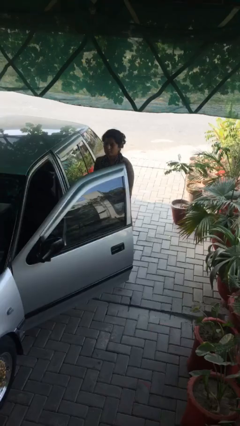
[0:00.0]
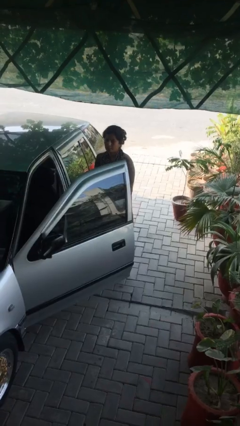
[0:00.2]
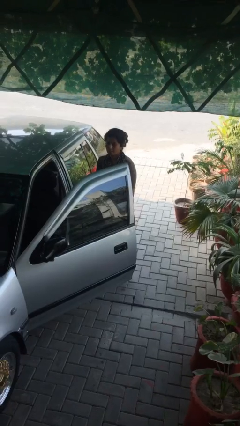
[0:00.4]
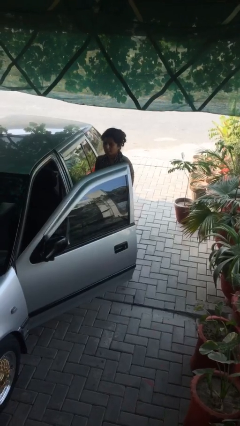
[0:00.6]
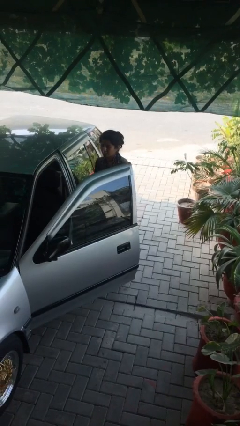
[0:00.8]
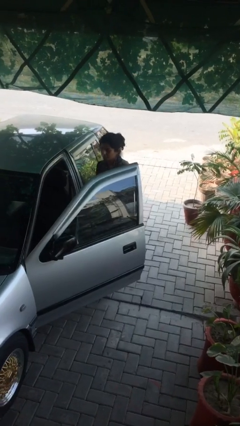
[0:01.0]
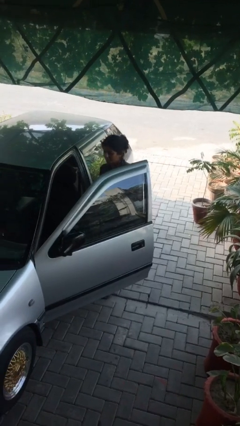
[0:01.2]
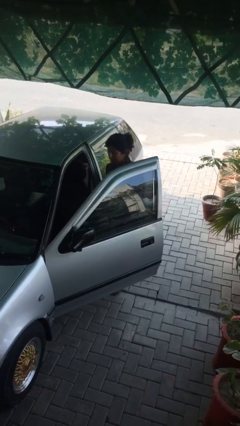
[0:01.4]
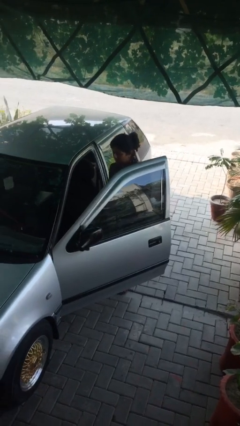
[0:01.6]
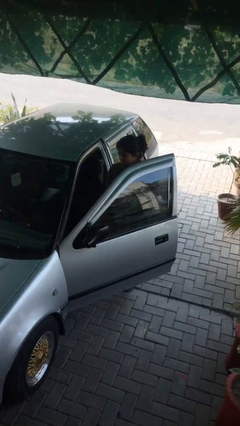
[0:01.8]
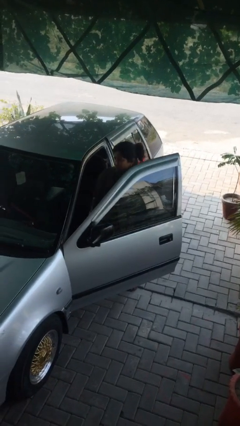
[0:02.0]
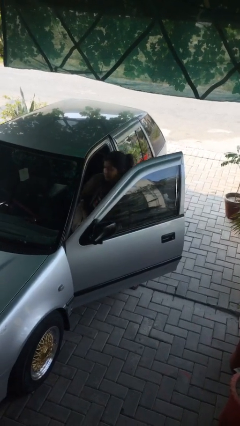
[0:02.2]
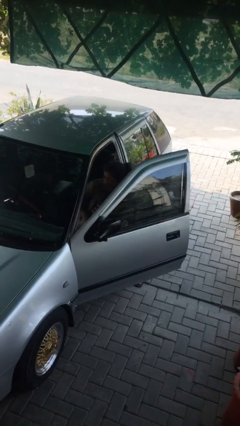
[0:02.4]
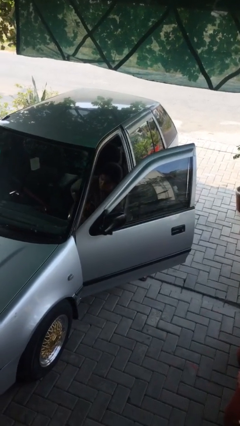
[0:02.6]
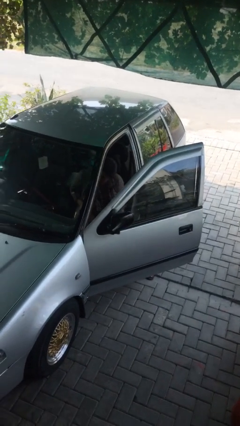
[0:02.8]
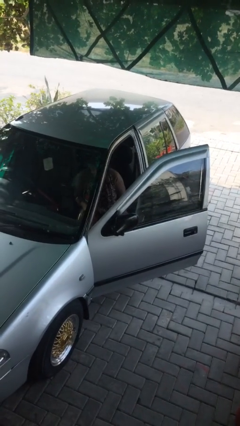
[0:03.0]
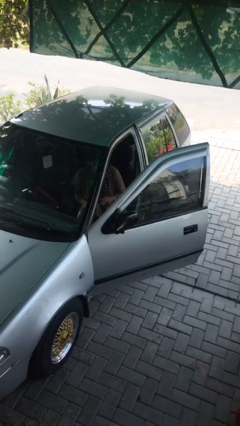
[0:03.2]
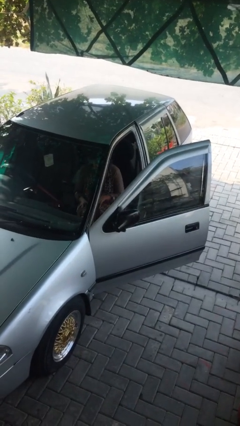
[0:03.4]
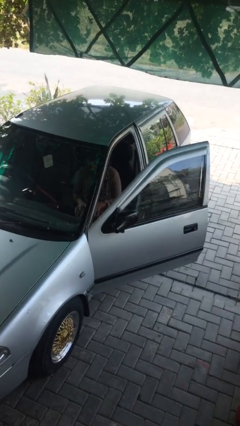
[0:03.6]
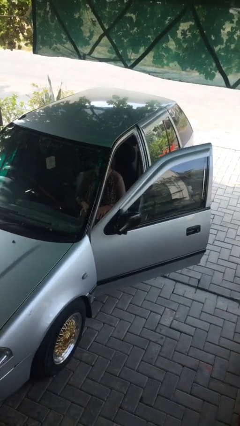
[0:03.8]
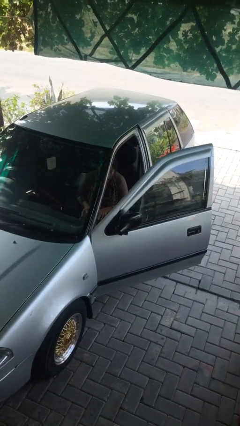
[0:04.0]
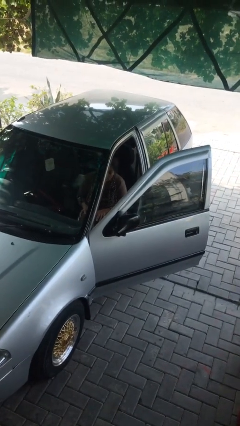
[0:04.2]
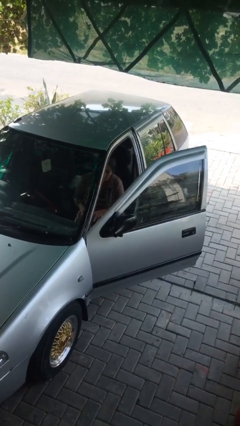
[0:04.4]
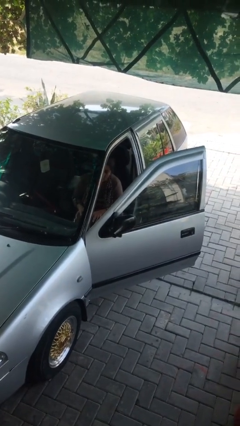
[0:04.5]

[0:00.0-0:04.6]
person enters car

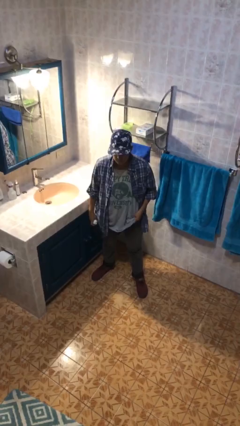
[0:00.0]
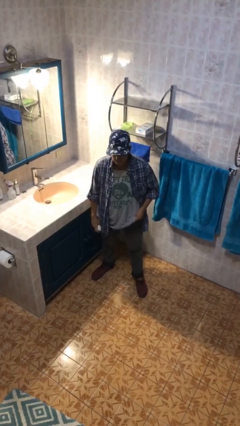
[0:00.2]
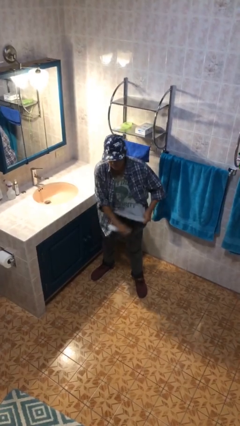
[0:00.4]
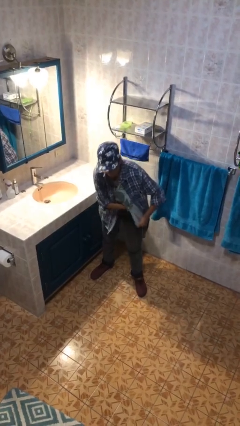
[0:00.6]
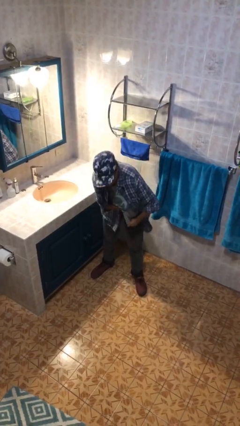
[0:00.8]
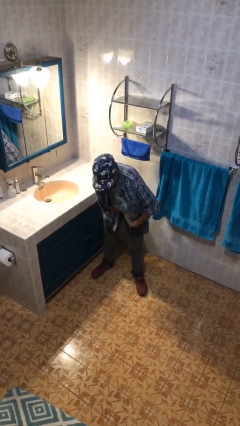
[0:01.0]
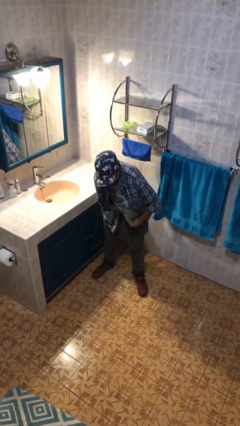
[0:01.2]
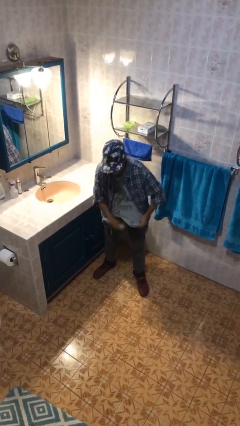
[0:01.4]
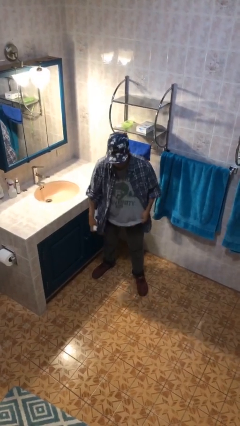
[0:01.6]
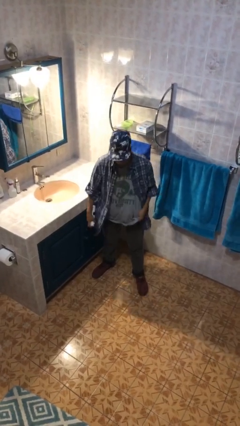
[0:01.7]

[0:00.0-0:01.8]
person applies deodorant

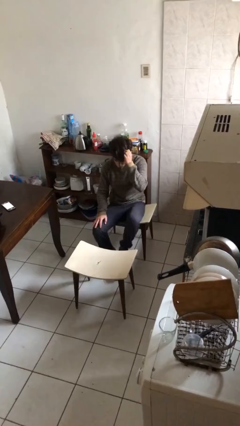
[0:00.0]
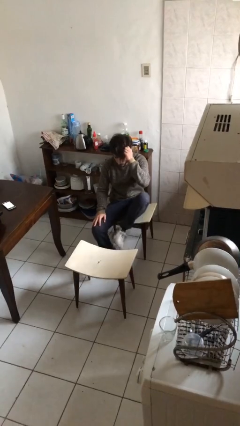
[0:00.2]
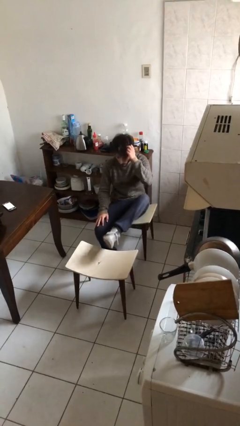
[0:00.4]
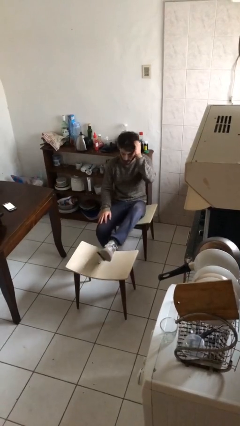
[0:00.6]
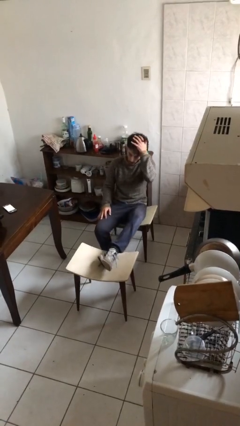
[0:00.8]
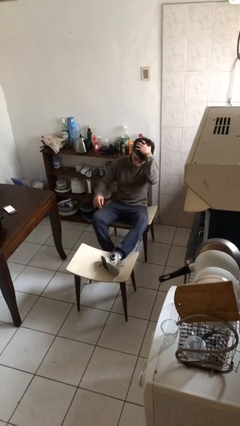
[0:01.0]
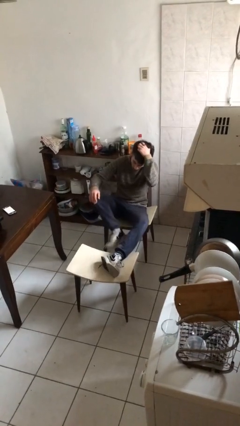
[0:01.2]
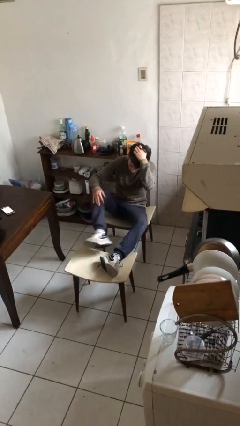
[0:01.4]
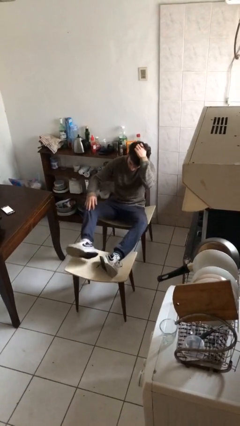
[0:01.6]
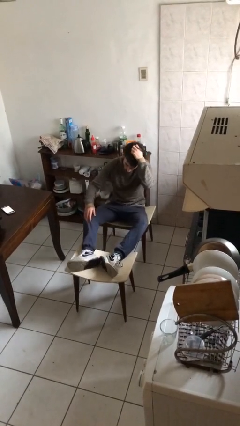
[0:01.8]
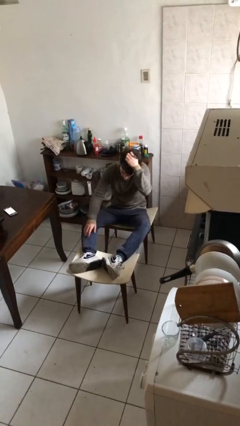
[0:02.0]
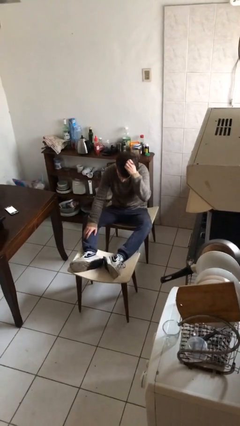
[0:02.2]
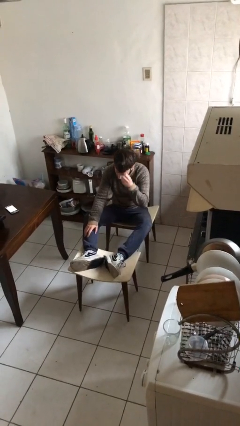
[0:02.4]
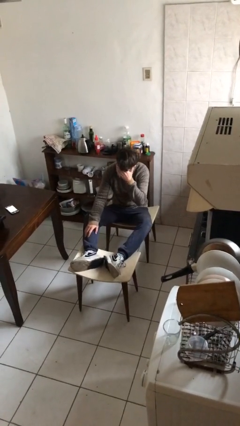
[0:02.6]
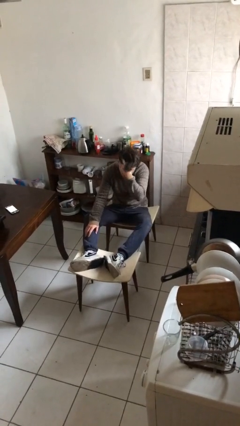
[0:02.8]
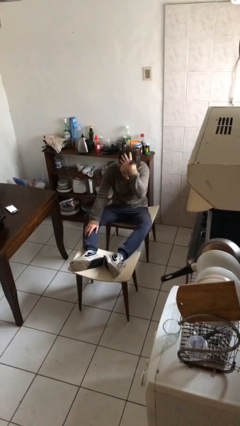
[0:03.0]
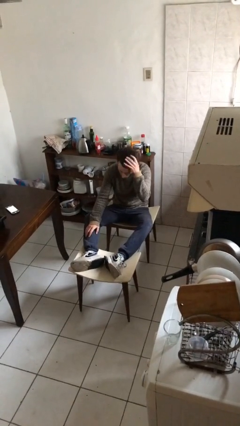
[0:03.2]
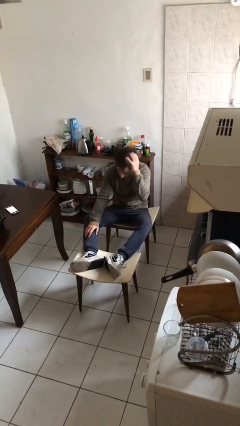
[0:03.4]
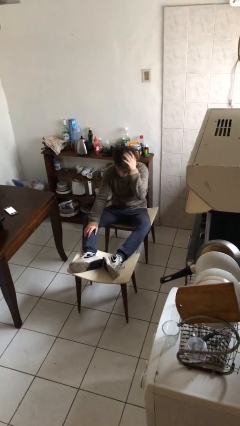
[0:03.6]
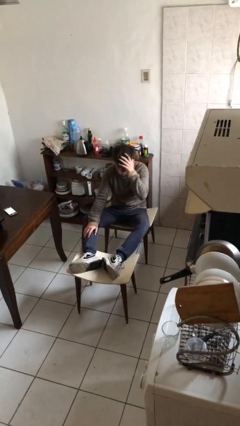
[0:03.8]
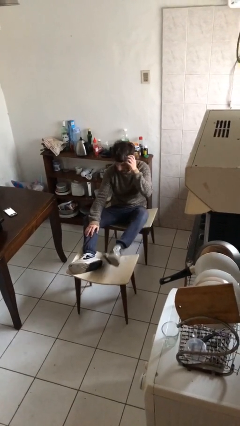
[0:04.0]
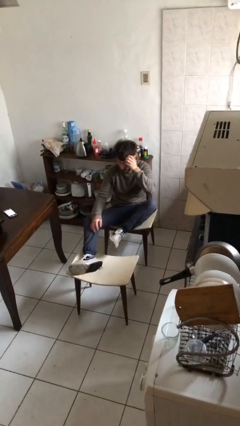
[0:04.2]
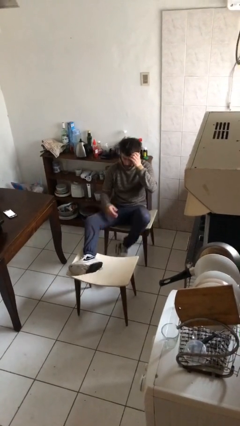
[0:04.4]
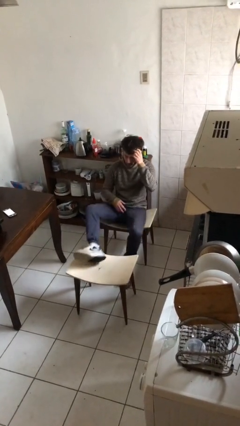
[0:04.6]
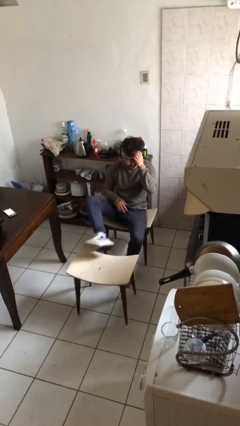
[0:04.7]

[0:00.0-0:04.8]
person puts feet up

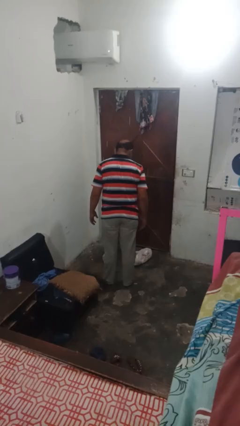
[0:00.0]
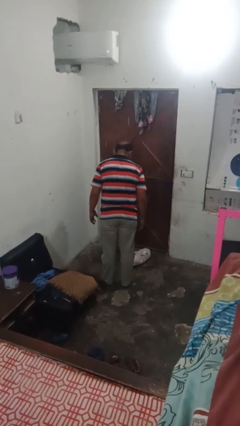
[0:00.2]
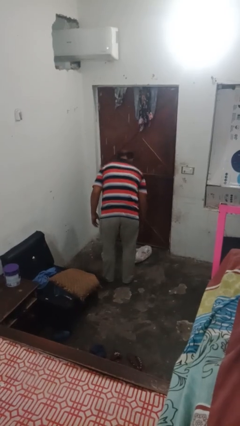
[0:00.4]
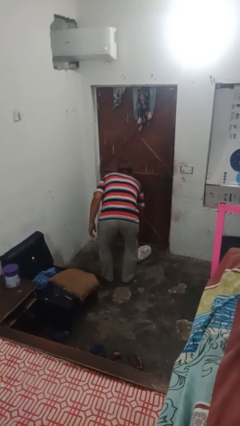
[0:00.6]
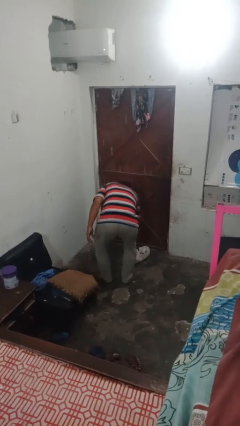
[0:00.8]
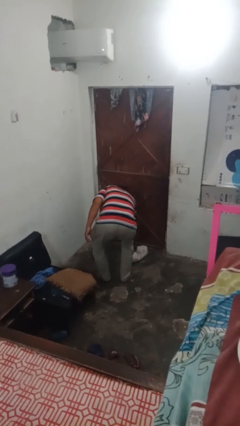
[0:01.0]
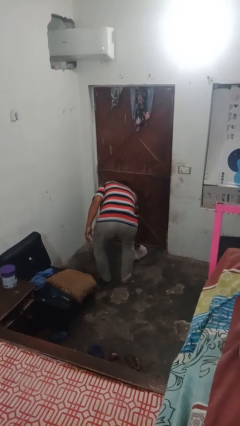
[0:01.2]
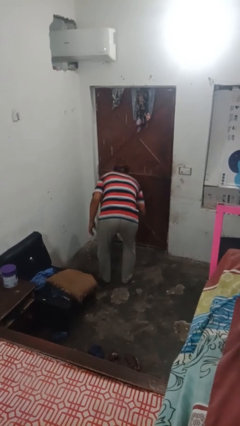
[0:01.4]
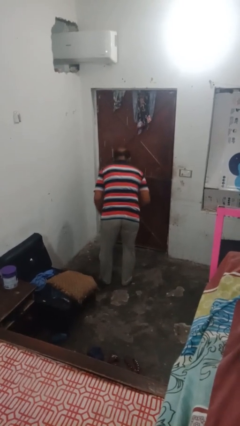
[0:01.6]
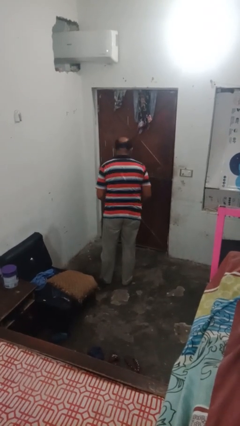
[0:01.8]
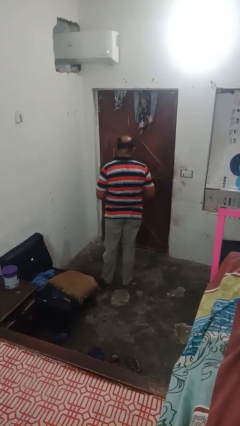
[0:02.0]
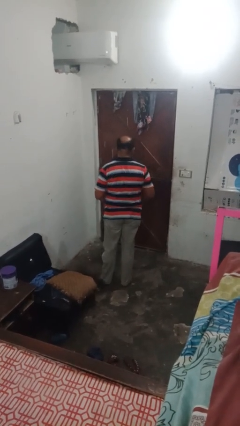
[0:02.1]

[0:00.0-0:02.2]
person picks up object from floor

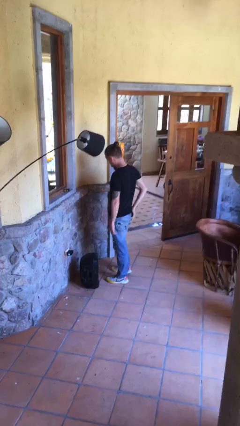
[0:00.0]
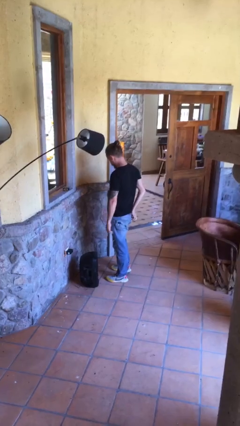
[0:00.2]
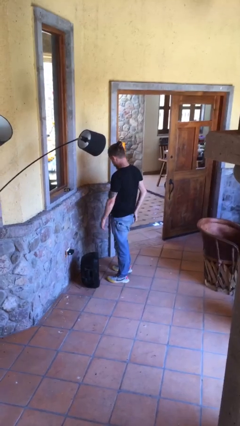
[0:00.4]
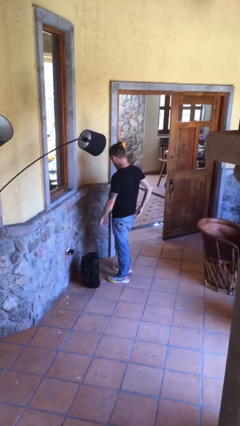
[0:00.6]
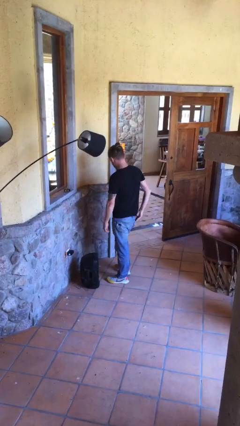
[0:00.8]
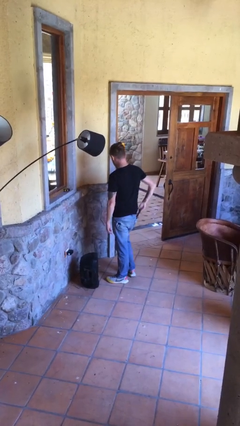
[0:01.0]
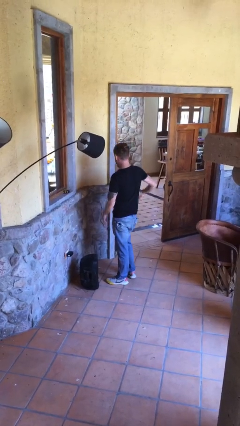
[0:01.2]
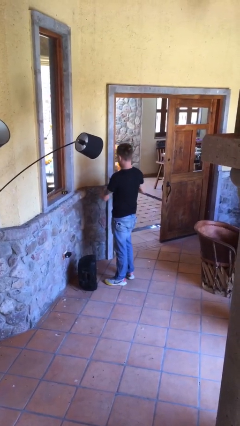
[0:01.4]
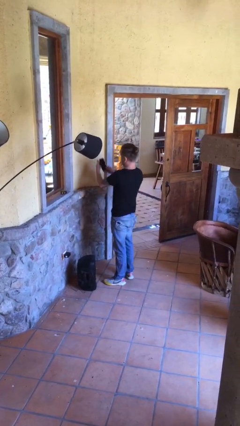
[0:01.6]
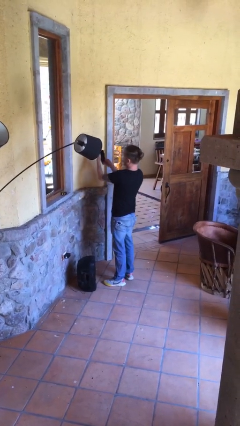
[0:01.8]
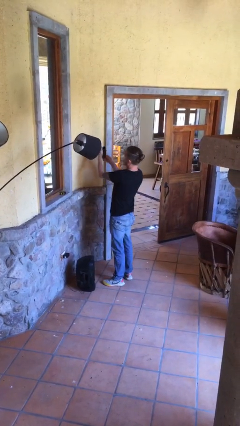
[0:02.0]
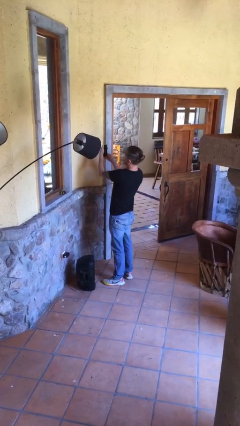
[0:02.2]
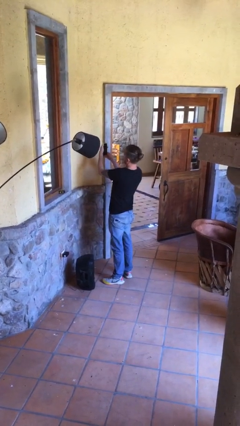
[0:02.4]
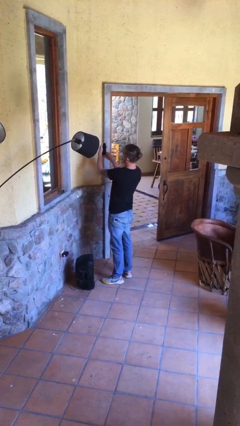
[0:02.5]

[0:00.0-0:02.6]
person takes phone from pocket

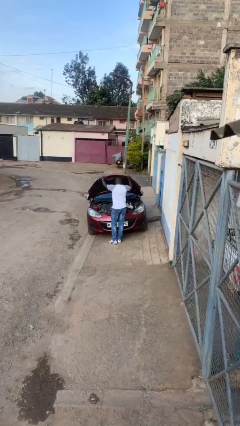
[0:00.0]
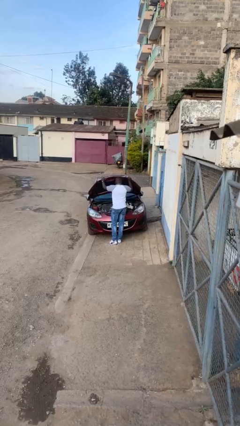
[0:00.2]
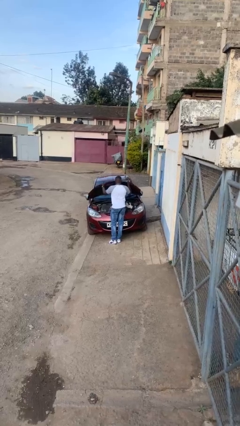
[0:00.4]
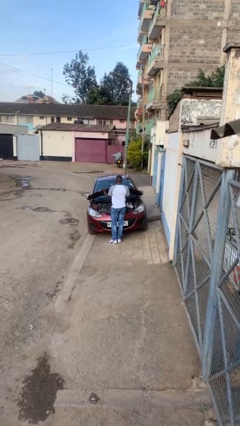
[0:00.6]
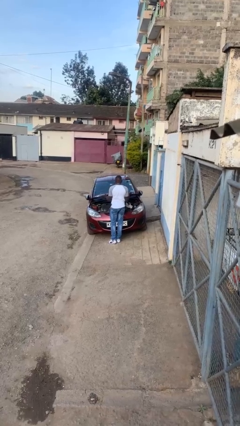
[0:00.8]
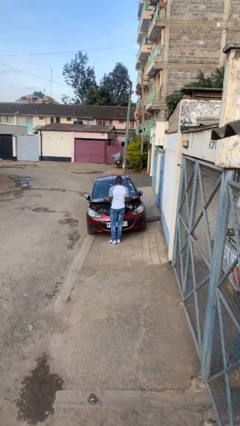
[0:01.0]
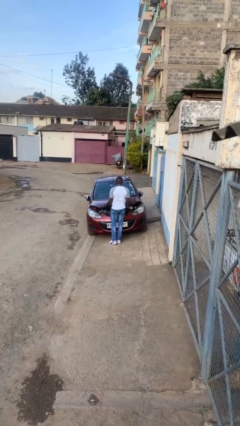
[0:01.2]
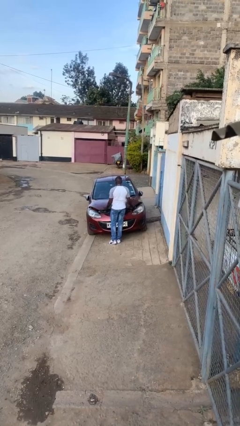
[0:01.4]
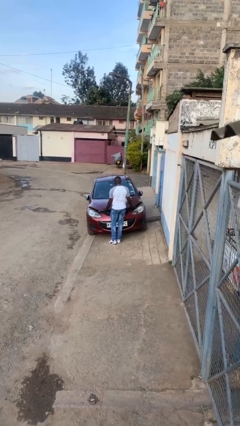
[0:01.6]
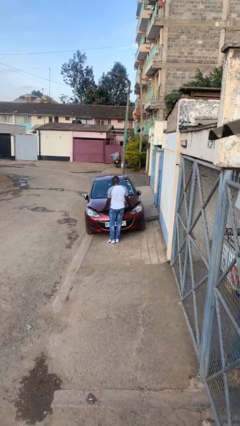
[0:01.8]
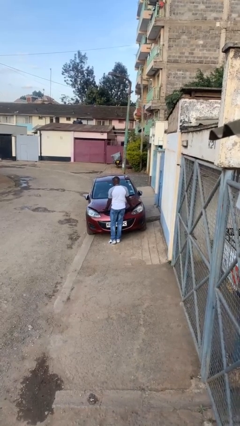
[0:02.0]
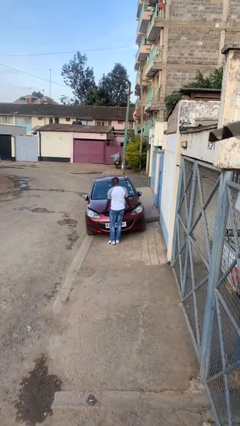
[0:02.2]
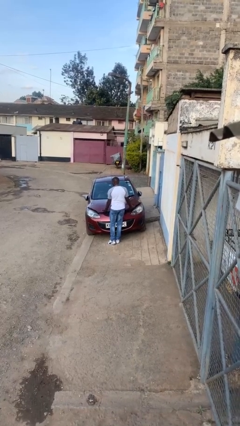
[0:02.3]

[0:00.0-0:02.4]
person closes car hood
